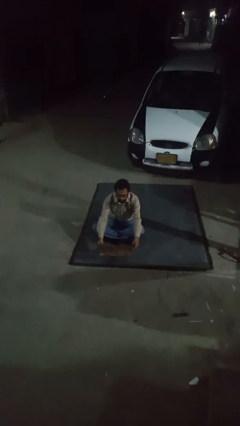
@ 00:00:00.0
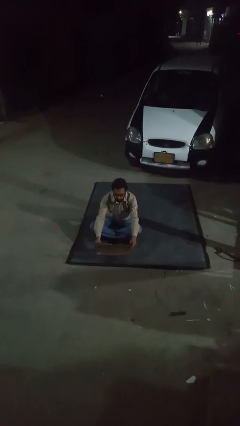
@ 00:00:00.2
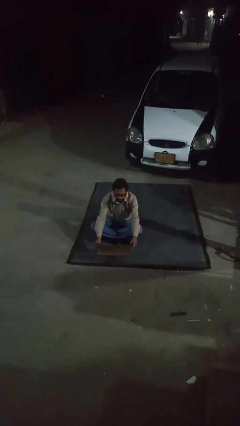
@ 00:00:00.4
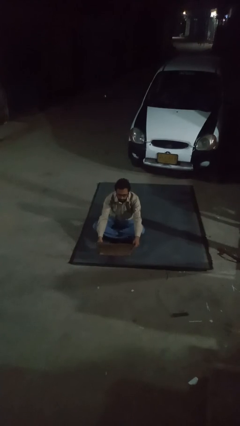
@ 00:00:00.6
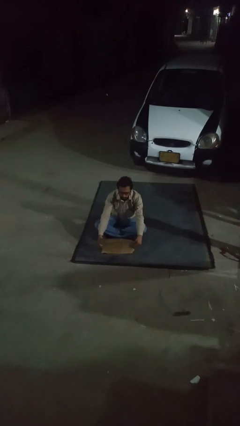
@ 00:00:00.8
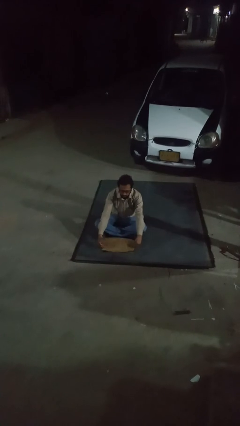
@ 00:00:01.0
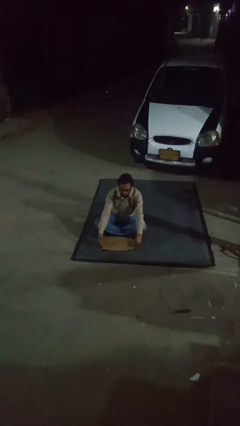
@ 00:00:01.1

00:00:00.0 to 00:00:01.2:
person closes laptop

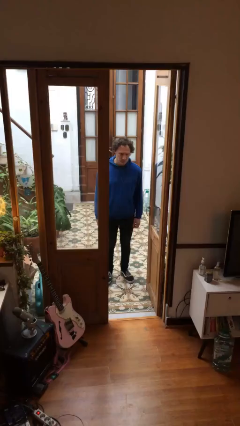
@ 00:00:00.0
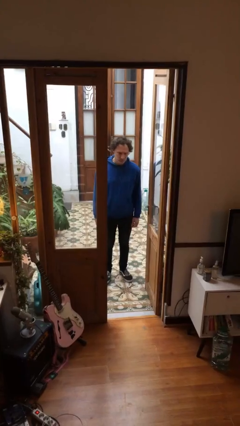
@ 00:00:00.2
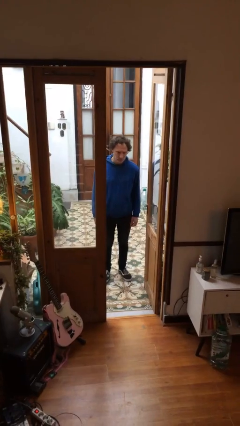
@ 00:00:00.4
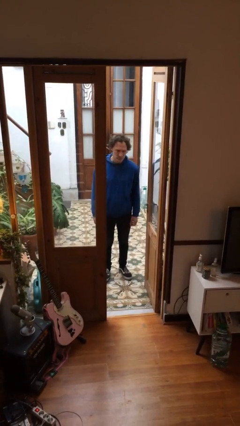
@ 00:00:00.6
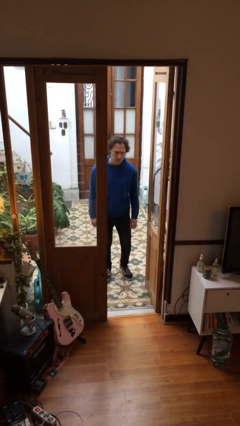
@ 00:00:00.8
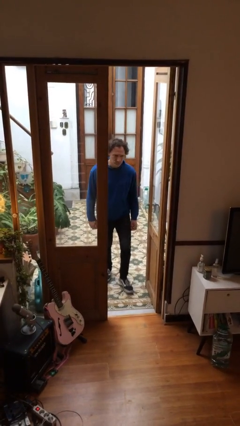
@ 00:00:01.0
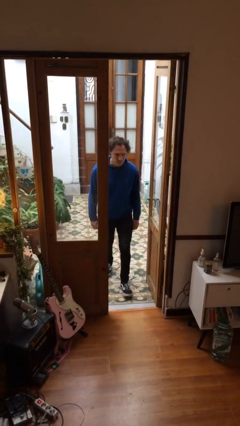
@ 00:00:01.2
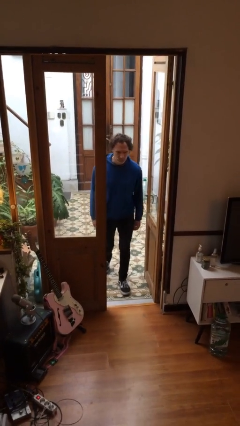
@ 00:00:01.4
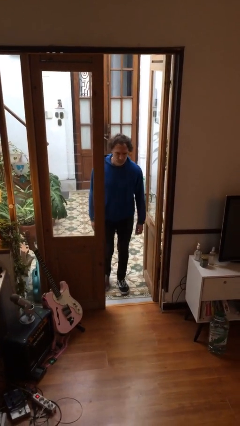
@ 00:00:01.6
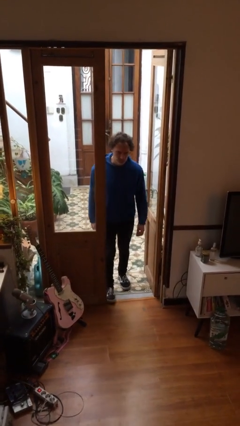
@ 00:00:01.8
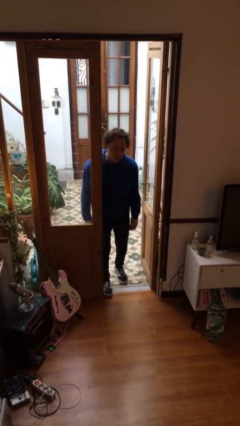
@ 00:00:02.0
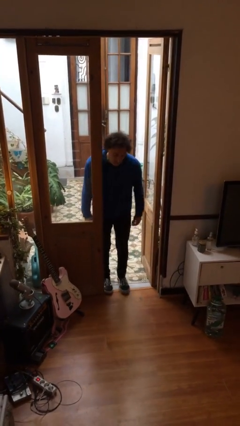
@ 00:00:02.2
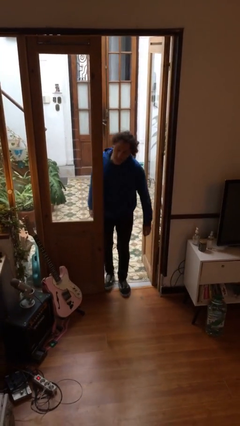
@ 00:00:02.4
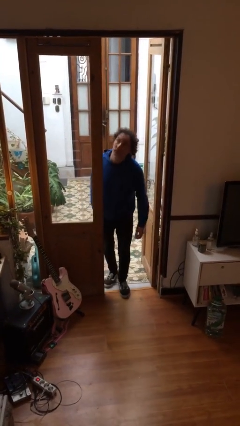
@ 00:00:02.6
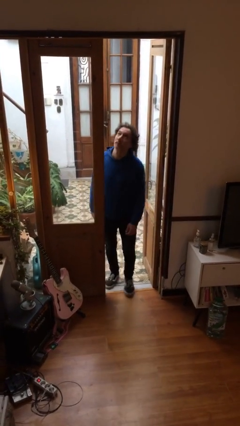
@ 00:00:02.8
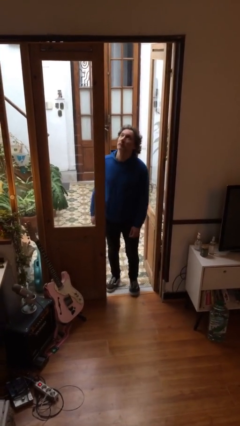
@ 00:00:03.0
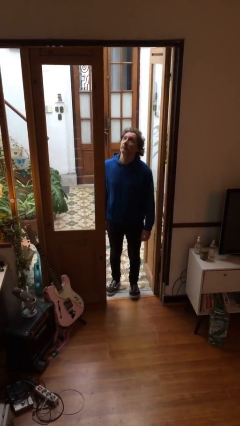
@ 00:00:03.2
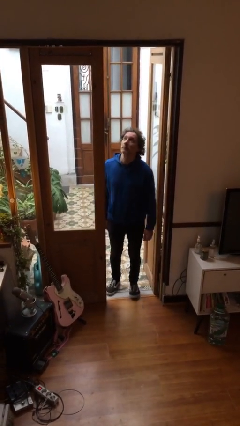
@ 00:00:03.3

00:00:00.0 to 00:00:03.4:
person bumps into wall

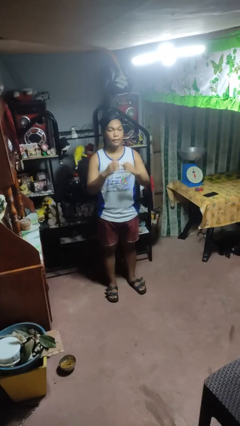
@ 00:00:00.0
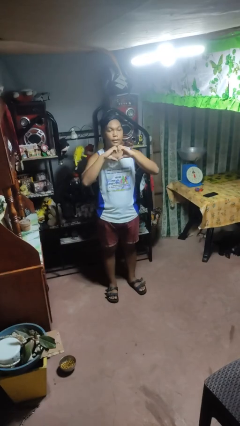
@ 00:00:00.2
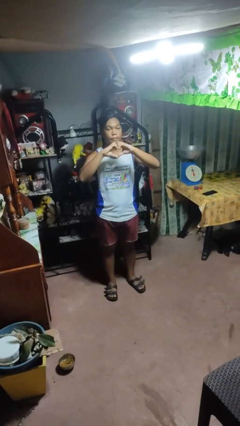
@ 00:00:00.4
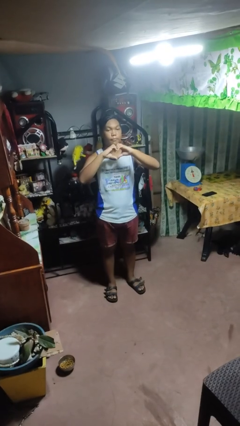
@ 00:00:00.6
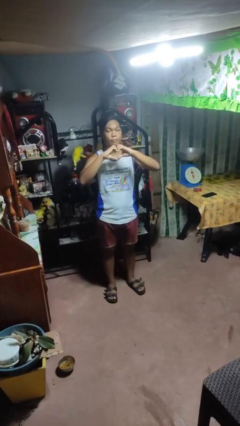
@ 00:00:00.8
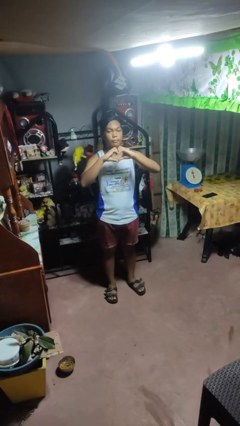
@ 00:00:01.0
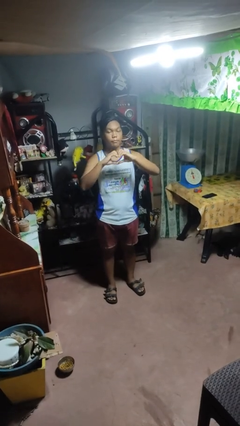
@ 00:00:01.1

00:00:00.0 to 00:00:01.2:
person gestures heart

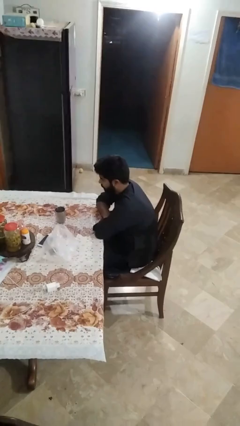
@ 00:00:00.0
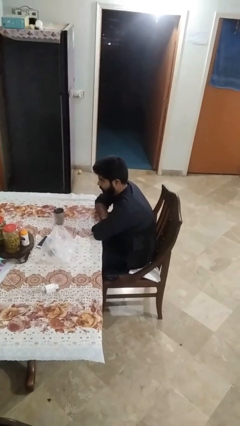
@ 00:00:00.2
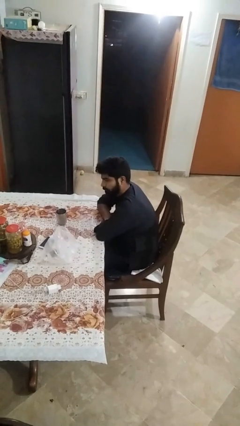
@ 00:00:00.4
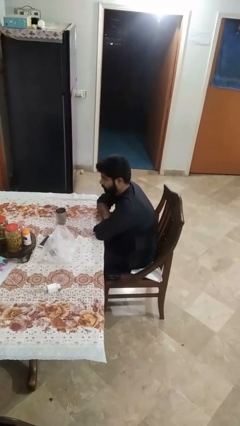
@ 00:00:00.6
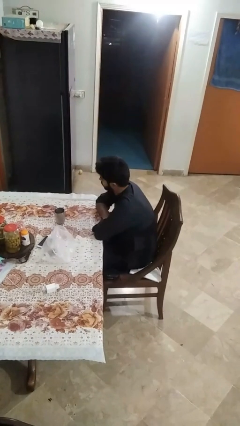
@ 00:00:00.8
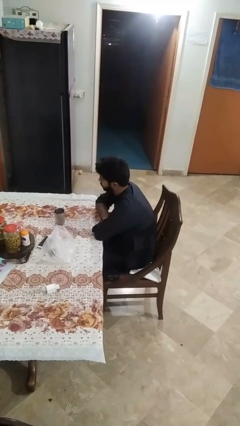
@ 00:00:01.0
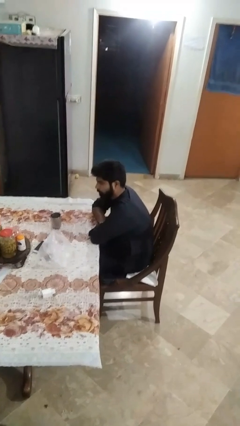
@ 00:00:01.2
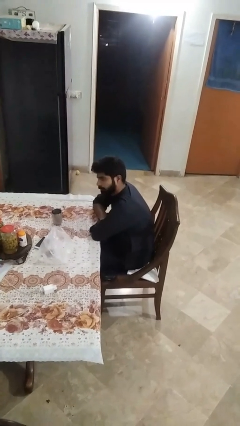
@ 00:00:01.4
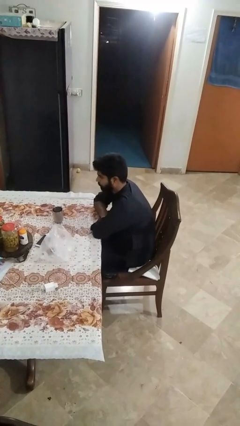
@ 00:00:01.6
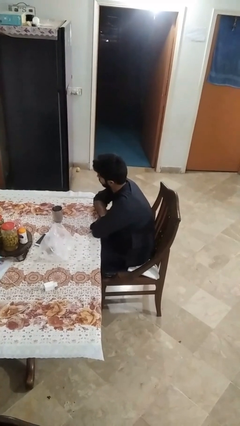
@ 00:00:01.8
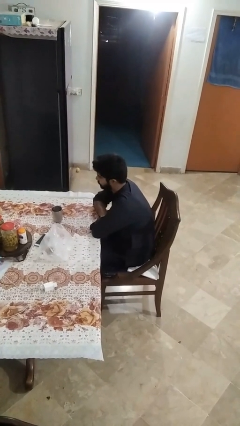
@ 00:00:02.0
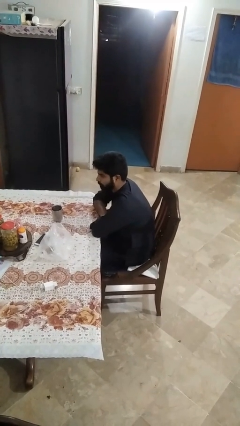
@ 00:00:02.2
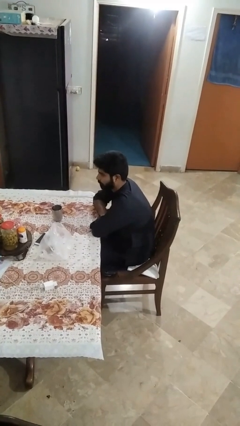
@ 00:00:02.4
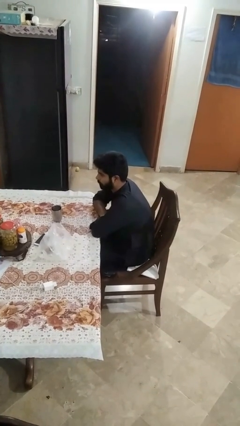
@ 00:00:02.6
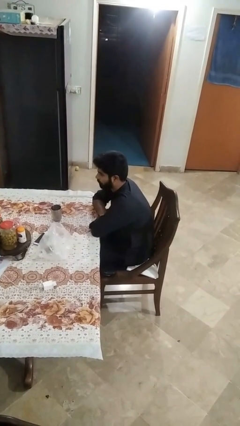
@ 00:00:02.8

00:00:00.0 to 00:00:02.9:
person shakes head

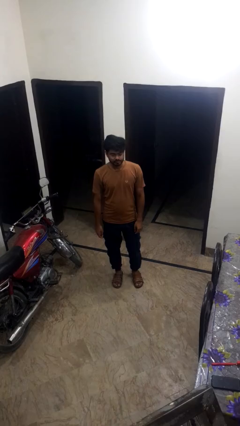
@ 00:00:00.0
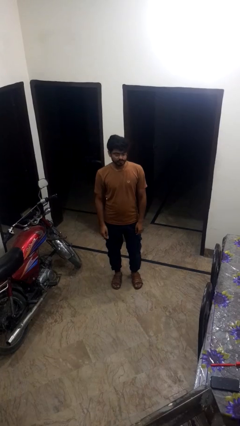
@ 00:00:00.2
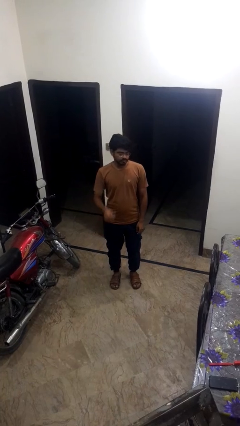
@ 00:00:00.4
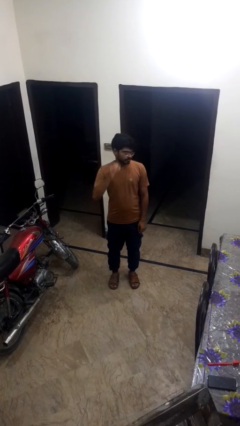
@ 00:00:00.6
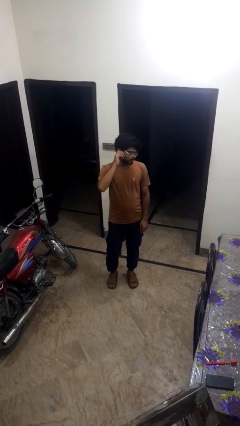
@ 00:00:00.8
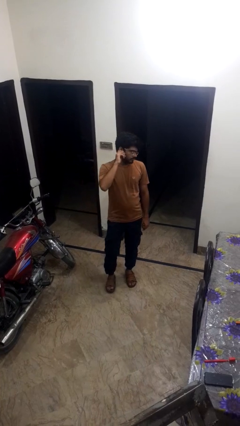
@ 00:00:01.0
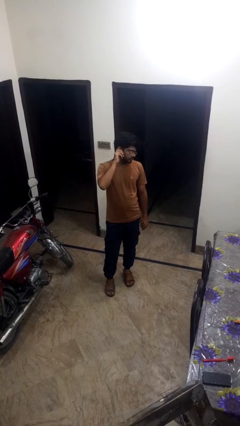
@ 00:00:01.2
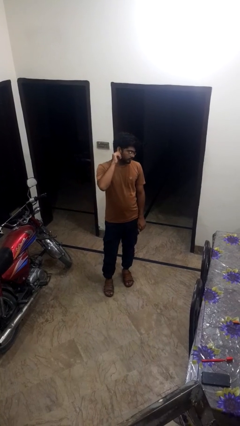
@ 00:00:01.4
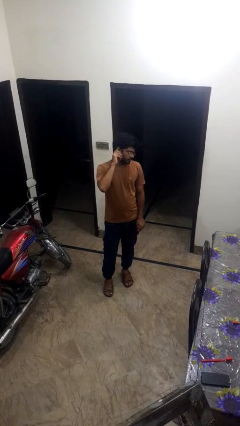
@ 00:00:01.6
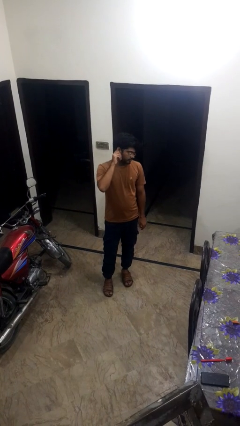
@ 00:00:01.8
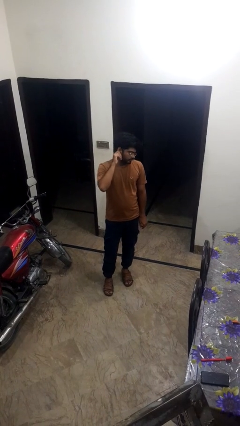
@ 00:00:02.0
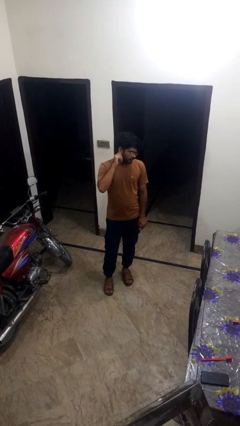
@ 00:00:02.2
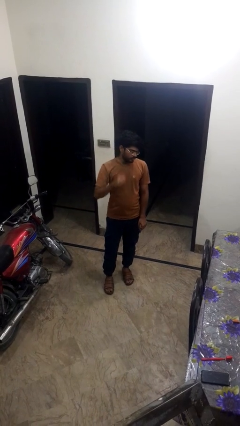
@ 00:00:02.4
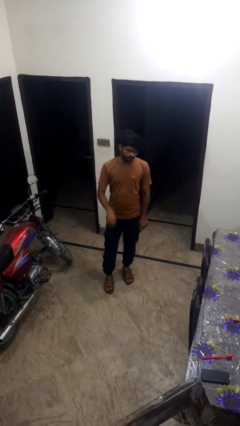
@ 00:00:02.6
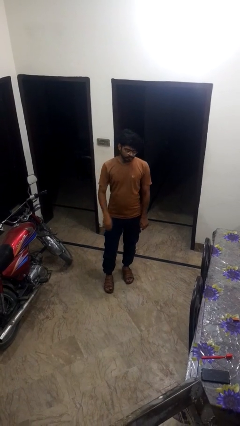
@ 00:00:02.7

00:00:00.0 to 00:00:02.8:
person touches earlobe

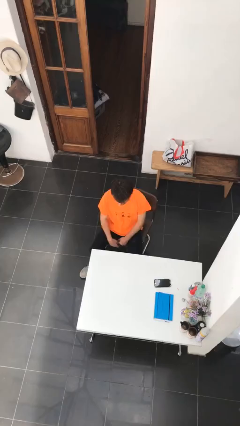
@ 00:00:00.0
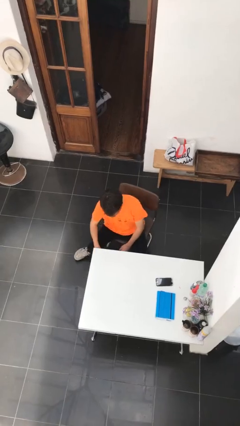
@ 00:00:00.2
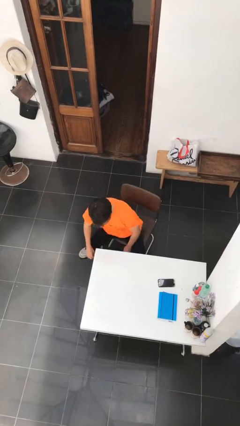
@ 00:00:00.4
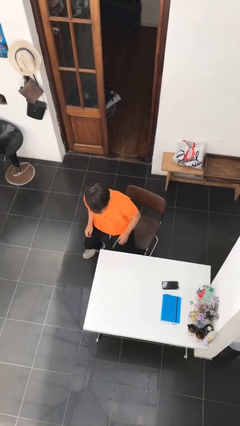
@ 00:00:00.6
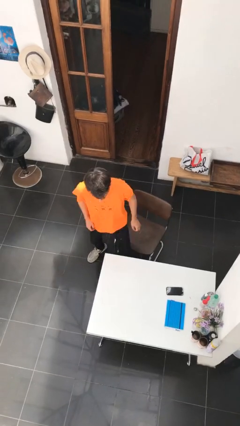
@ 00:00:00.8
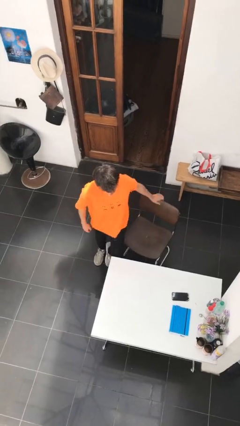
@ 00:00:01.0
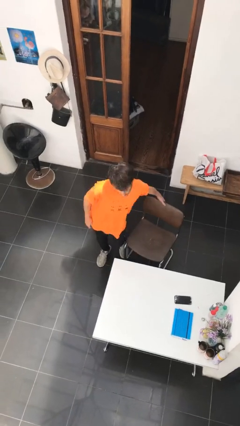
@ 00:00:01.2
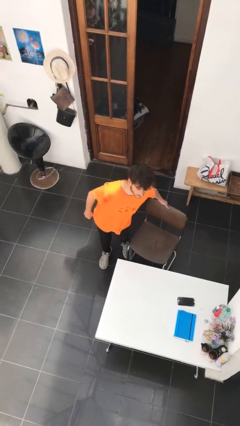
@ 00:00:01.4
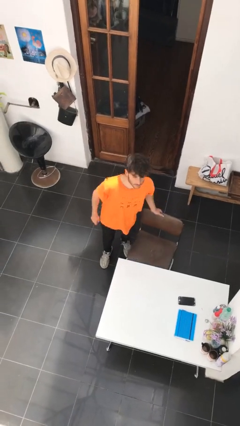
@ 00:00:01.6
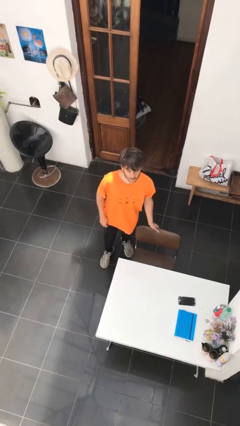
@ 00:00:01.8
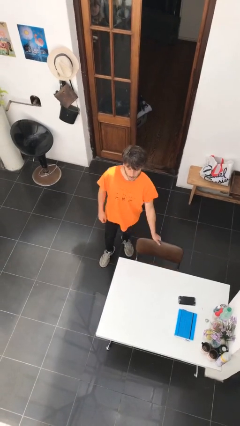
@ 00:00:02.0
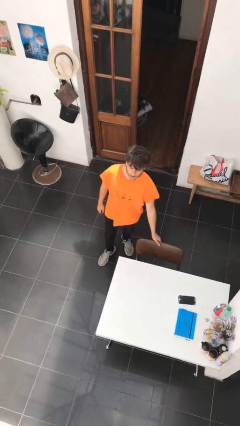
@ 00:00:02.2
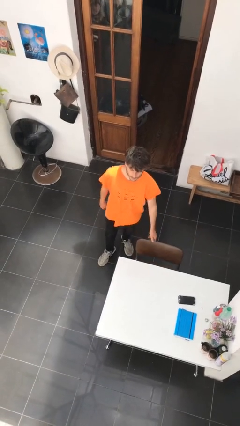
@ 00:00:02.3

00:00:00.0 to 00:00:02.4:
person stands up

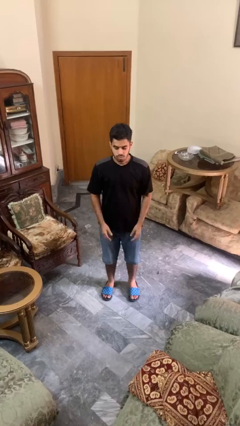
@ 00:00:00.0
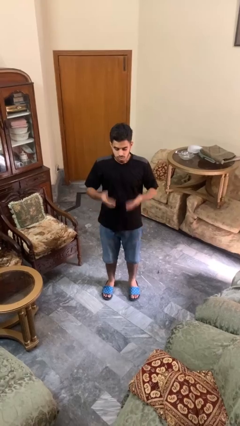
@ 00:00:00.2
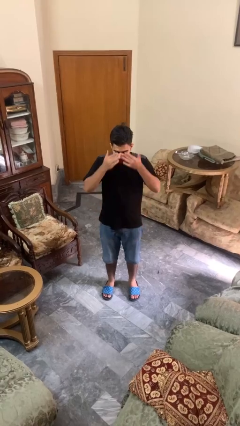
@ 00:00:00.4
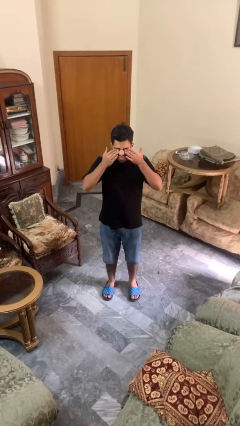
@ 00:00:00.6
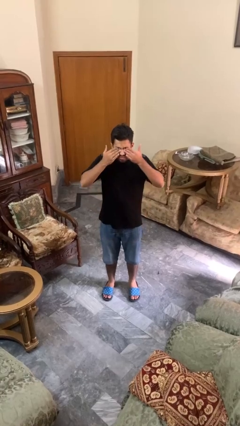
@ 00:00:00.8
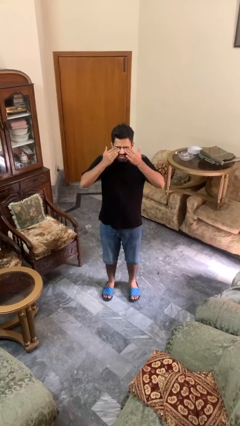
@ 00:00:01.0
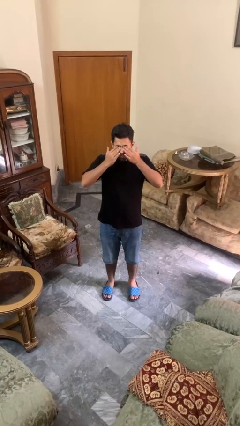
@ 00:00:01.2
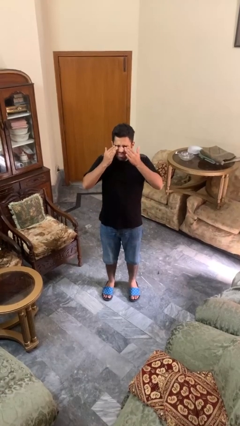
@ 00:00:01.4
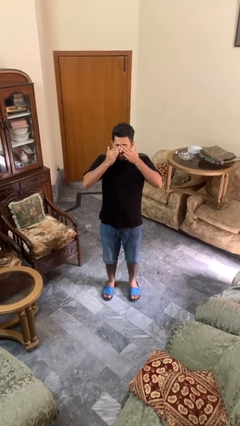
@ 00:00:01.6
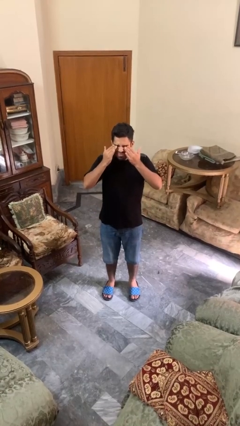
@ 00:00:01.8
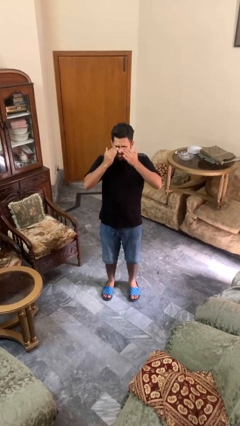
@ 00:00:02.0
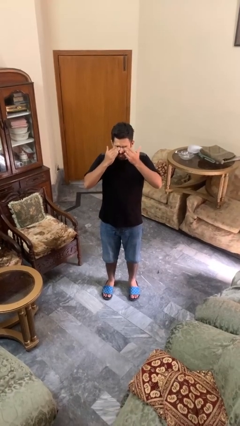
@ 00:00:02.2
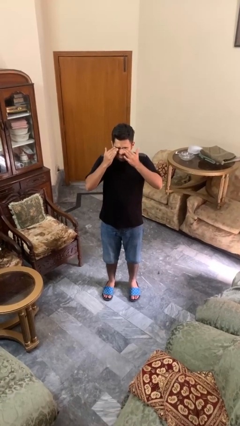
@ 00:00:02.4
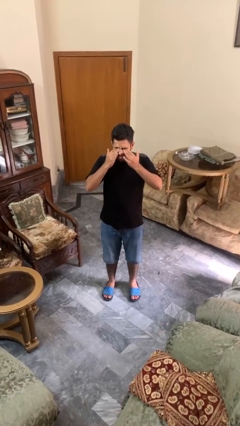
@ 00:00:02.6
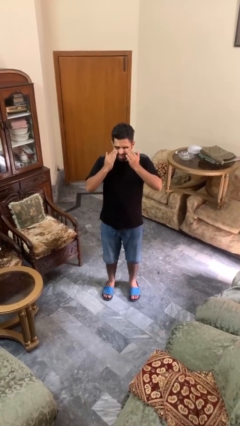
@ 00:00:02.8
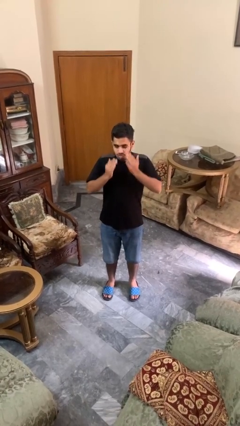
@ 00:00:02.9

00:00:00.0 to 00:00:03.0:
person rubs eyes
